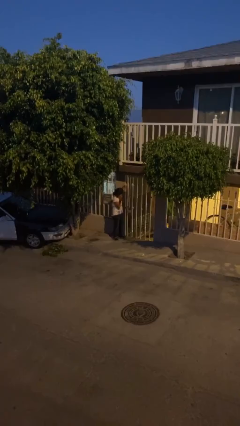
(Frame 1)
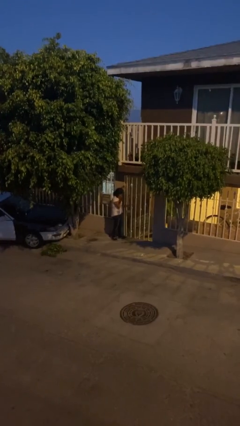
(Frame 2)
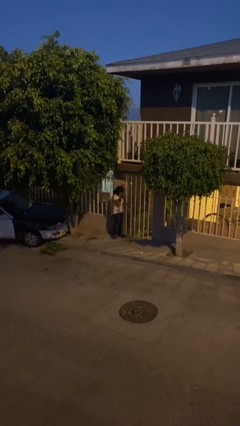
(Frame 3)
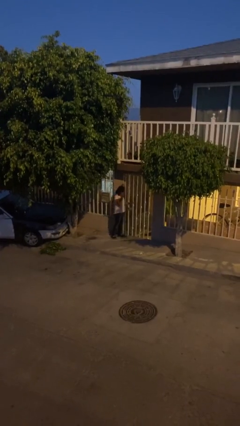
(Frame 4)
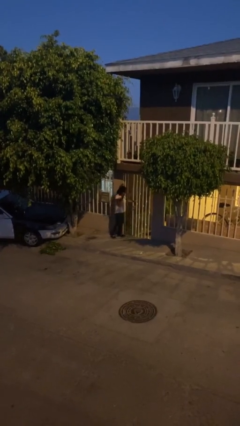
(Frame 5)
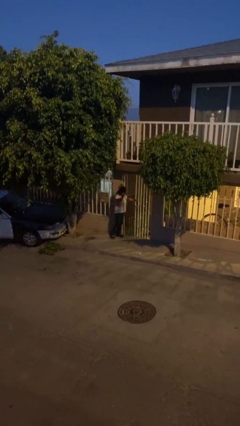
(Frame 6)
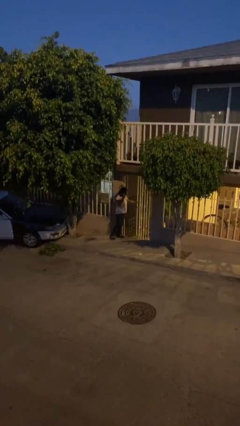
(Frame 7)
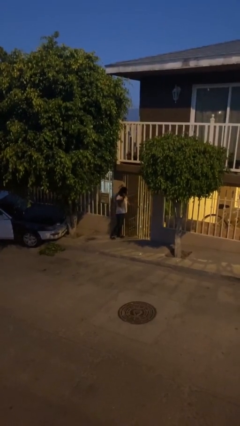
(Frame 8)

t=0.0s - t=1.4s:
person opens facility door

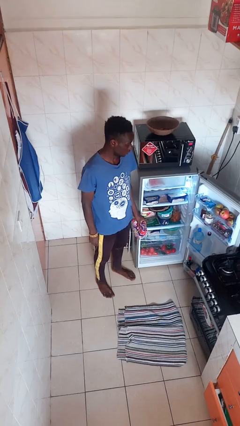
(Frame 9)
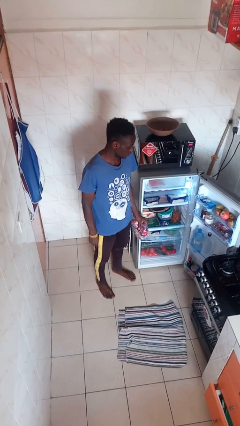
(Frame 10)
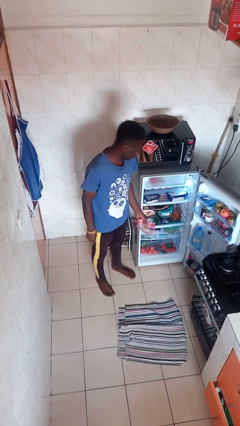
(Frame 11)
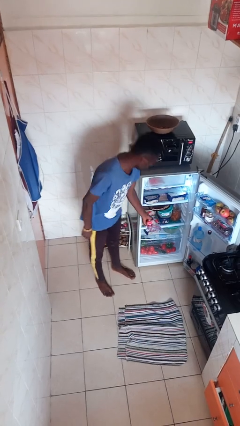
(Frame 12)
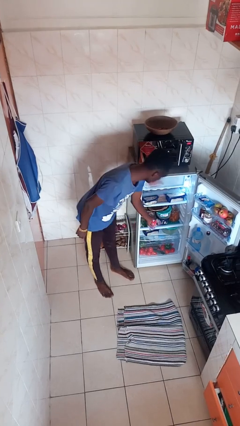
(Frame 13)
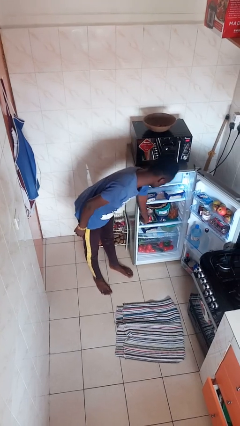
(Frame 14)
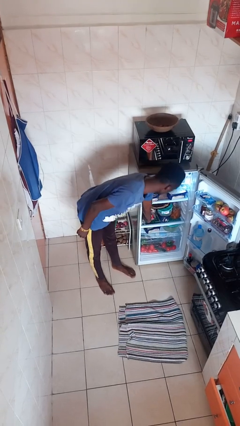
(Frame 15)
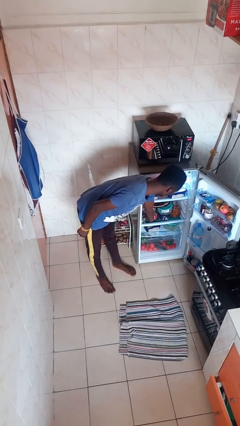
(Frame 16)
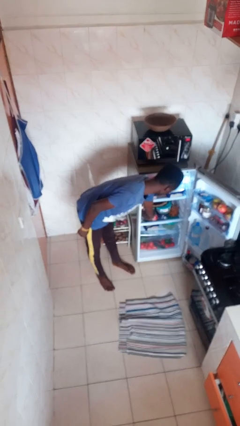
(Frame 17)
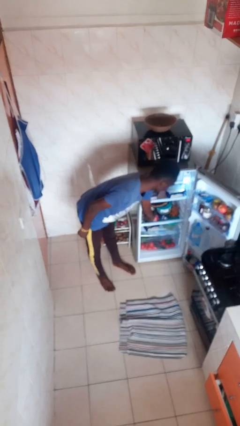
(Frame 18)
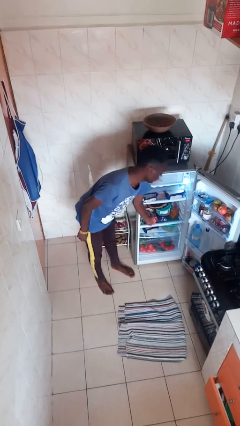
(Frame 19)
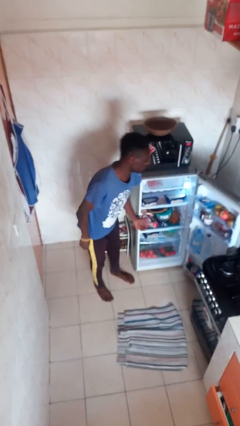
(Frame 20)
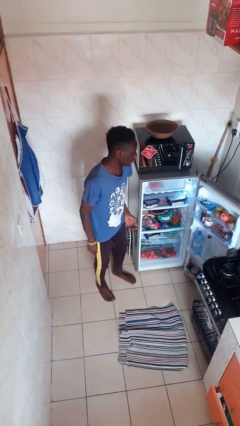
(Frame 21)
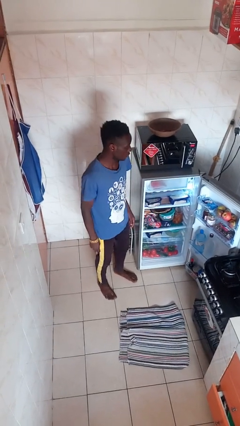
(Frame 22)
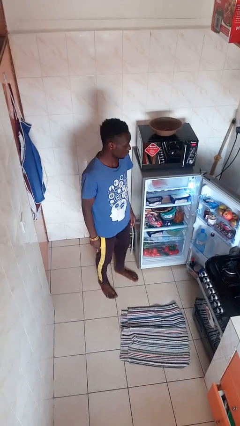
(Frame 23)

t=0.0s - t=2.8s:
person puts object into refrigerator

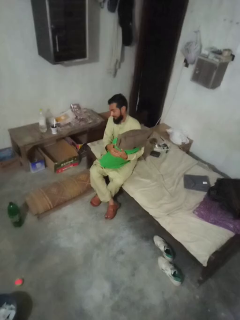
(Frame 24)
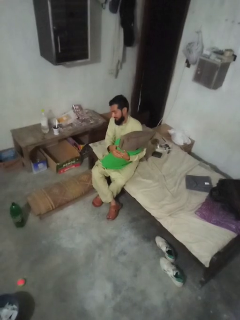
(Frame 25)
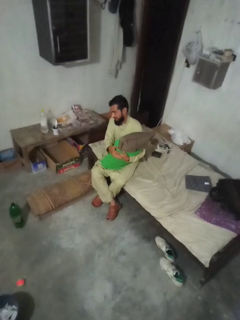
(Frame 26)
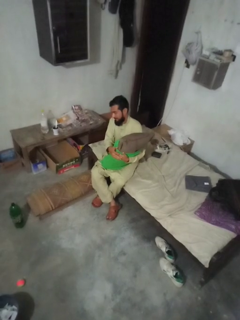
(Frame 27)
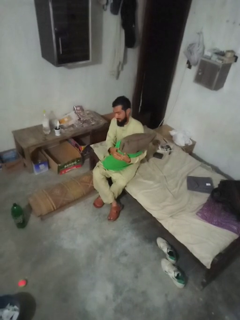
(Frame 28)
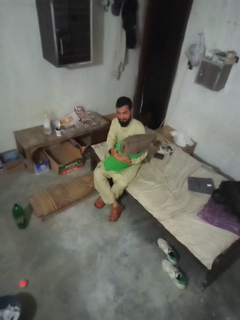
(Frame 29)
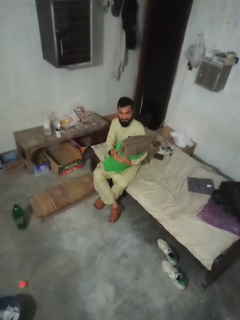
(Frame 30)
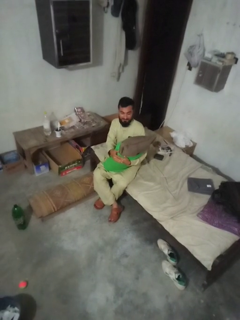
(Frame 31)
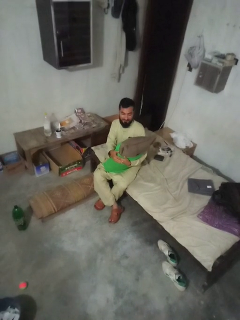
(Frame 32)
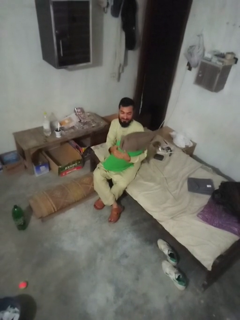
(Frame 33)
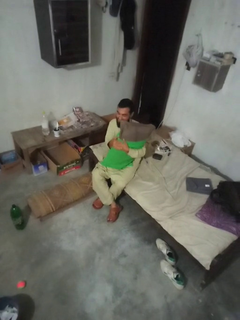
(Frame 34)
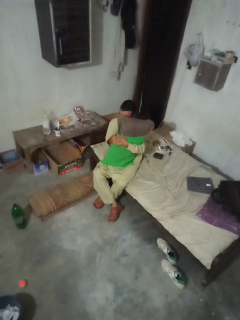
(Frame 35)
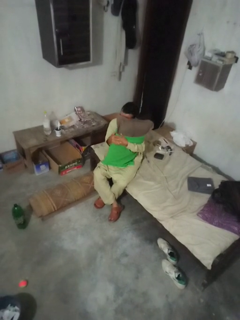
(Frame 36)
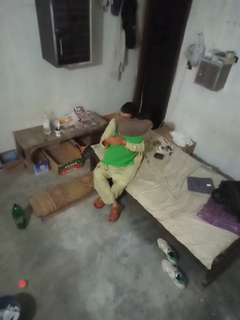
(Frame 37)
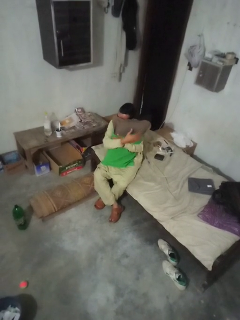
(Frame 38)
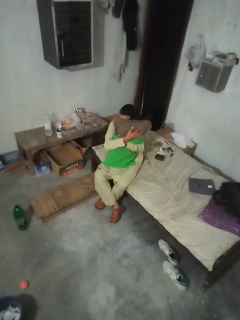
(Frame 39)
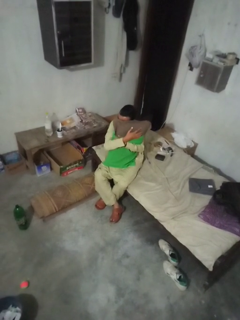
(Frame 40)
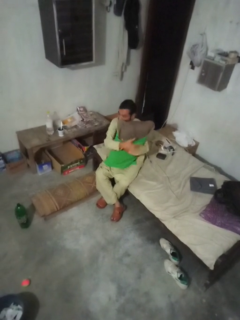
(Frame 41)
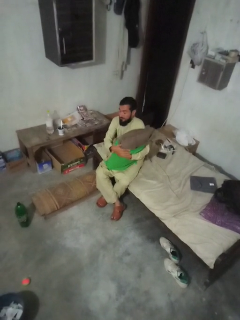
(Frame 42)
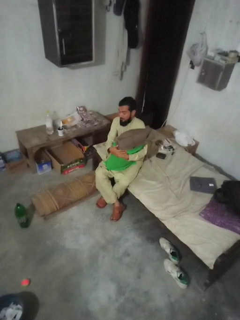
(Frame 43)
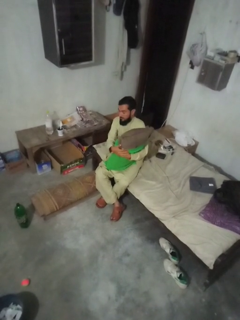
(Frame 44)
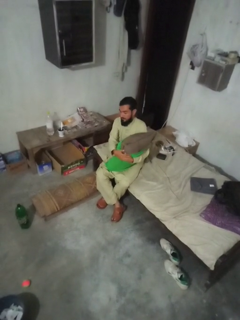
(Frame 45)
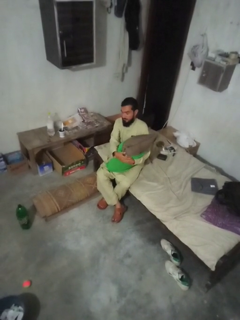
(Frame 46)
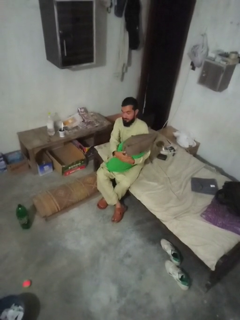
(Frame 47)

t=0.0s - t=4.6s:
person hugs stuffed animal

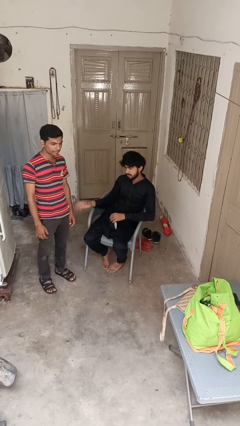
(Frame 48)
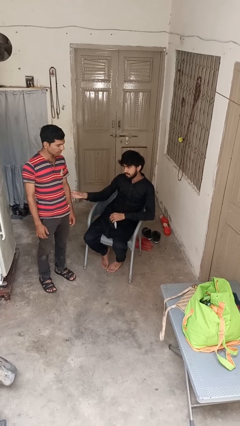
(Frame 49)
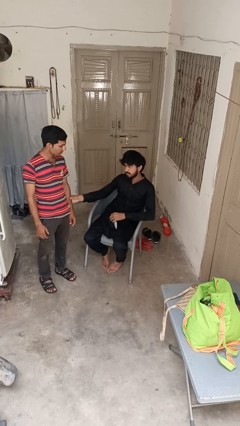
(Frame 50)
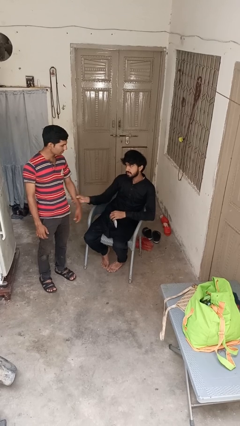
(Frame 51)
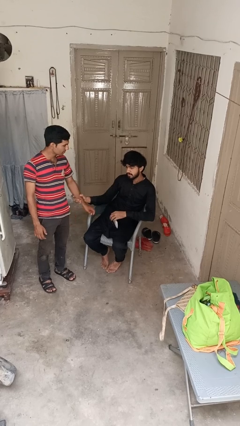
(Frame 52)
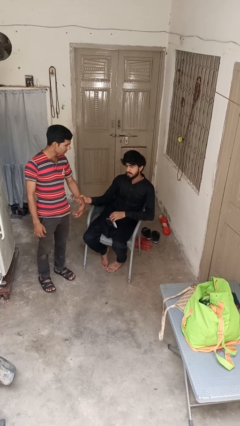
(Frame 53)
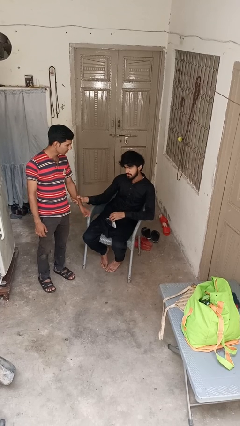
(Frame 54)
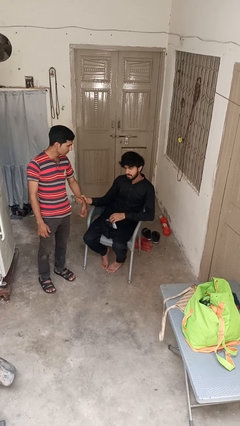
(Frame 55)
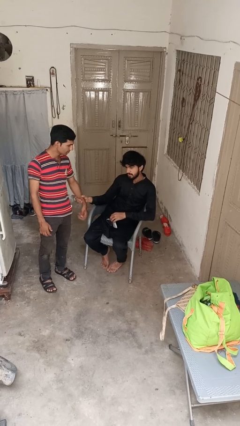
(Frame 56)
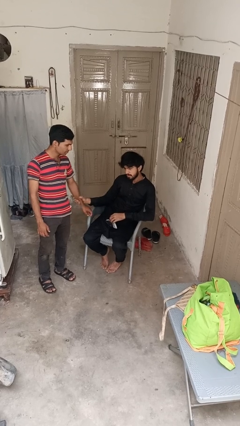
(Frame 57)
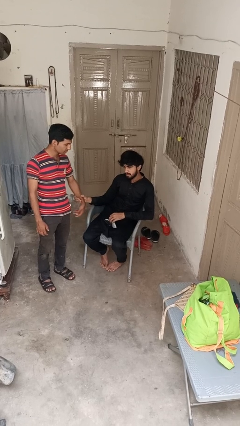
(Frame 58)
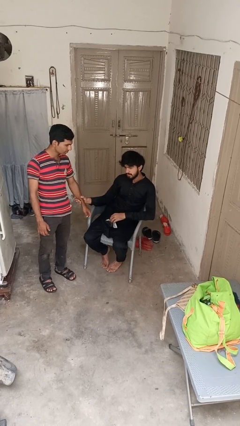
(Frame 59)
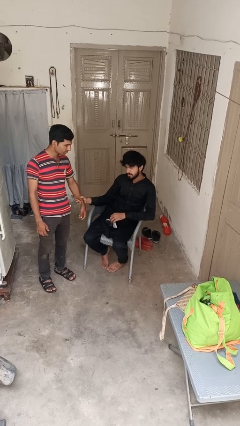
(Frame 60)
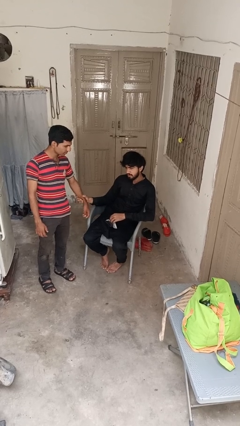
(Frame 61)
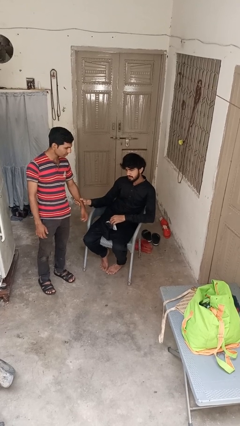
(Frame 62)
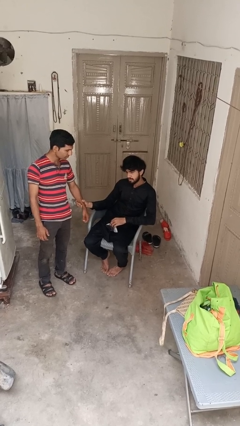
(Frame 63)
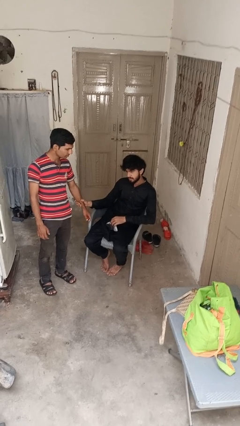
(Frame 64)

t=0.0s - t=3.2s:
person grabs person by forearm

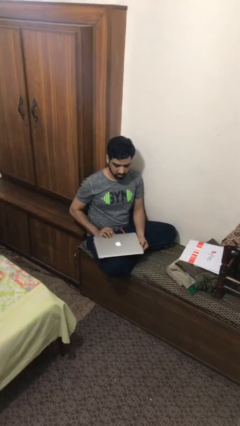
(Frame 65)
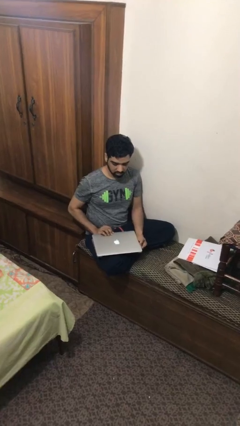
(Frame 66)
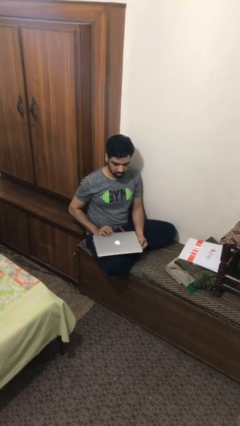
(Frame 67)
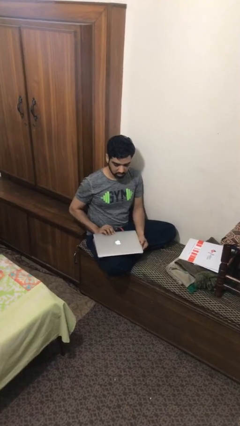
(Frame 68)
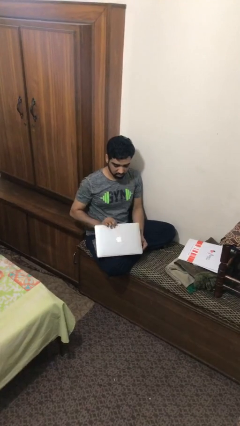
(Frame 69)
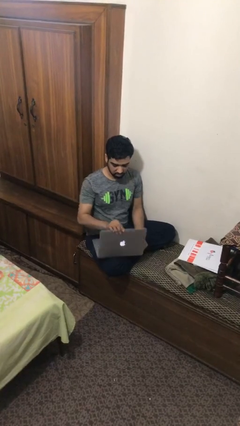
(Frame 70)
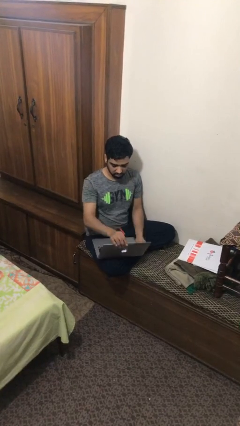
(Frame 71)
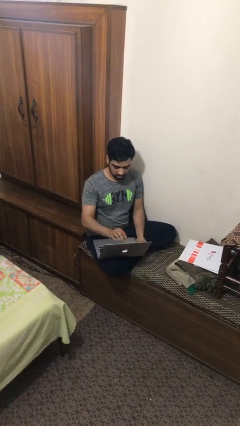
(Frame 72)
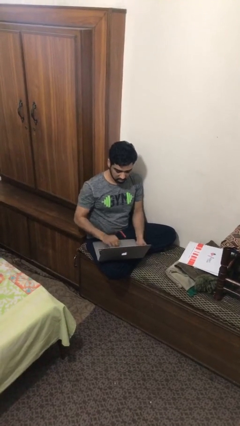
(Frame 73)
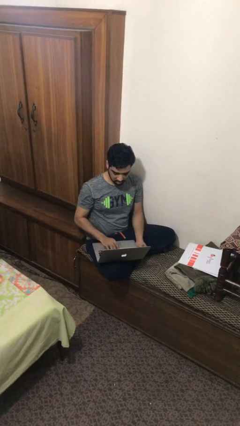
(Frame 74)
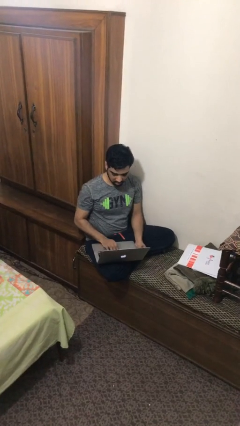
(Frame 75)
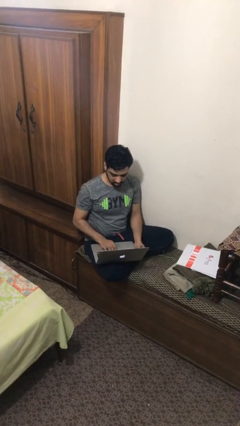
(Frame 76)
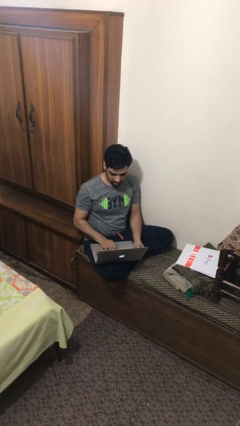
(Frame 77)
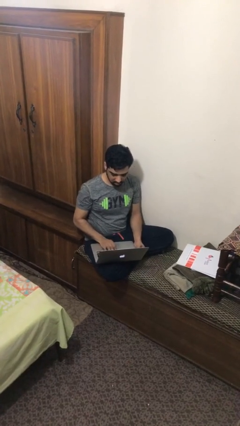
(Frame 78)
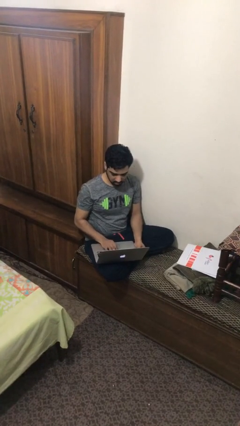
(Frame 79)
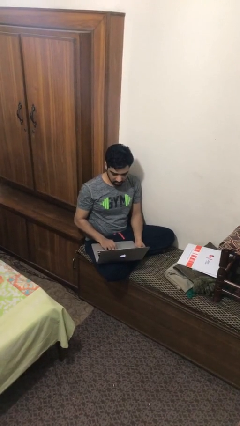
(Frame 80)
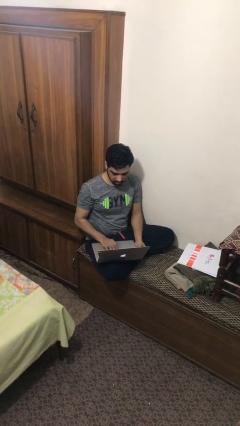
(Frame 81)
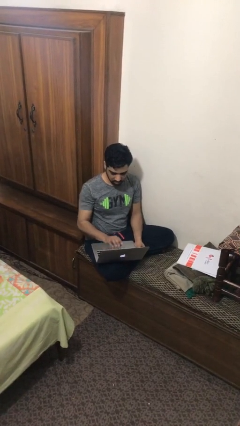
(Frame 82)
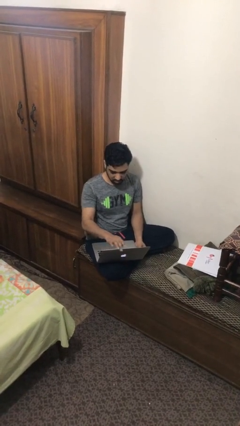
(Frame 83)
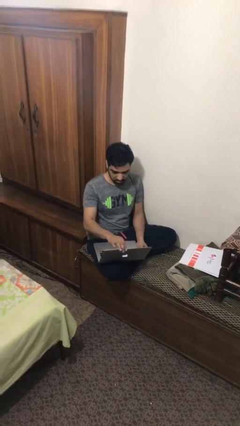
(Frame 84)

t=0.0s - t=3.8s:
person interacts with laptop

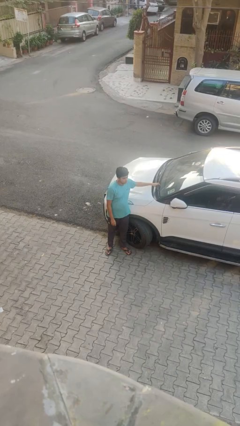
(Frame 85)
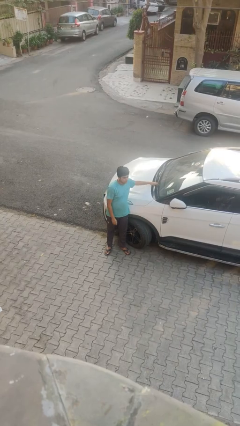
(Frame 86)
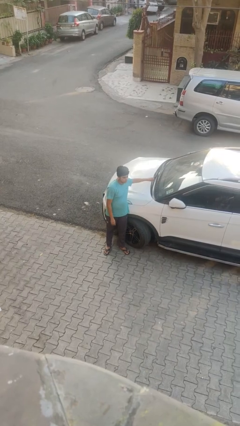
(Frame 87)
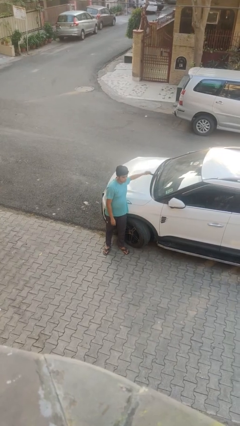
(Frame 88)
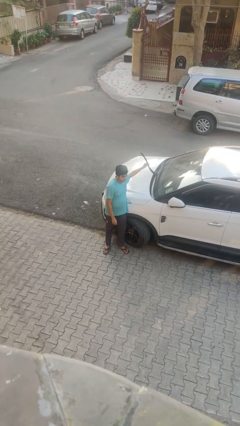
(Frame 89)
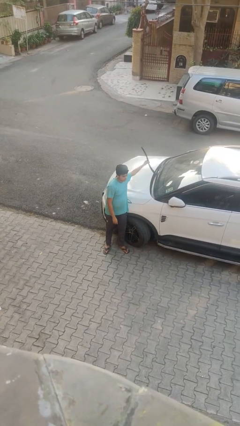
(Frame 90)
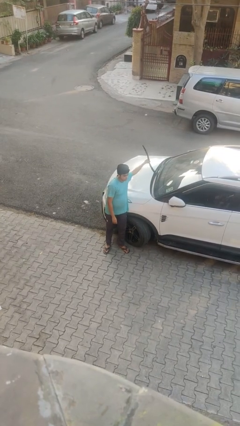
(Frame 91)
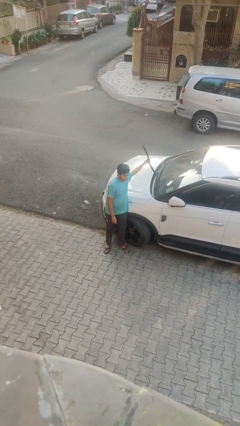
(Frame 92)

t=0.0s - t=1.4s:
person flips up car wipers

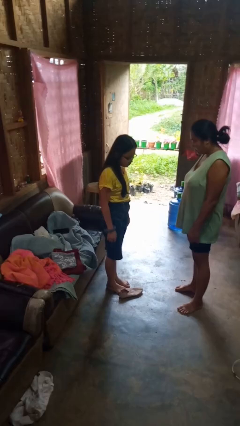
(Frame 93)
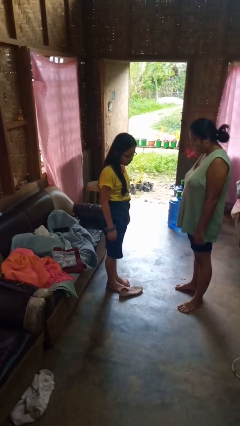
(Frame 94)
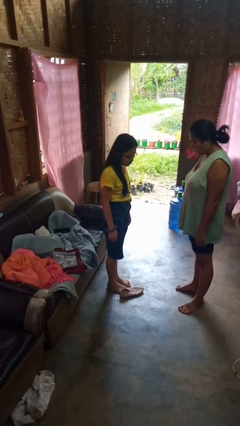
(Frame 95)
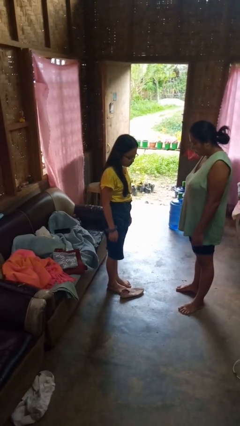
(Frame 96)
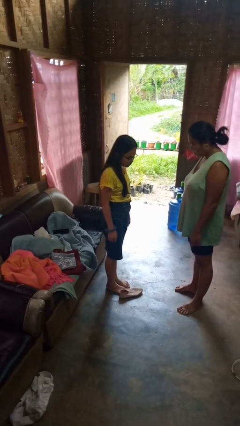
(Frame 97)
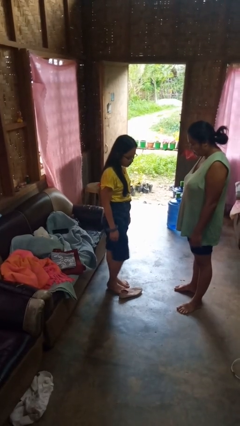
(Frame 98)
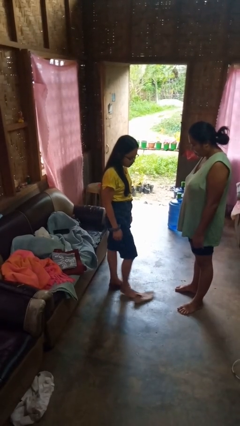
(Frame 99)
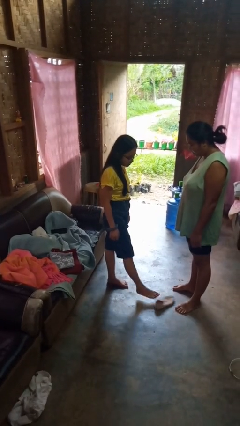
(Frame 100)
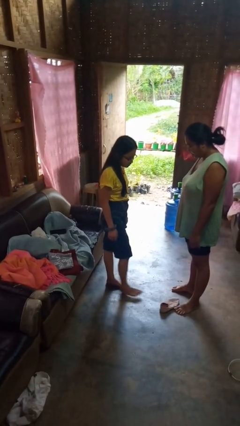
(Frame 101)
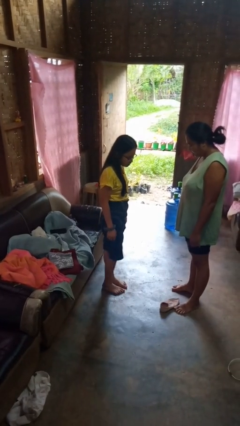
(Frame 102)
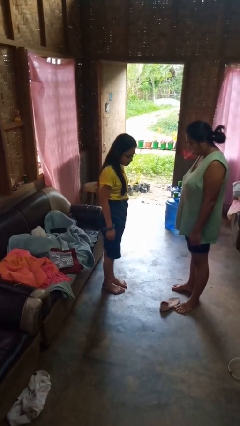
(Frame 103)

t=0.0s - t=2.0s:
person kicks object to person
